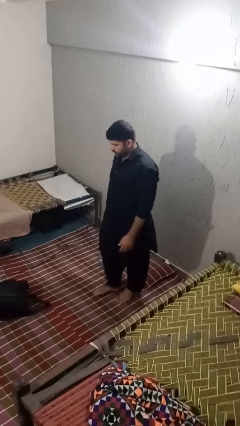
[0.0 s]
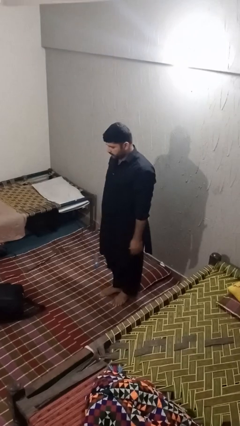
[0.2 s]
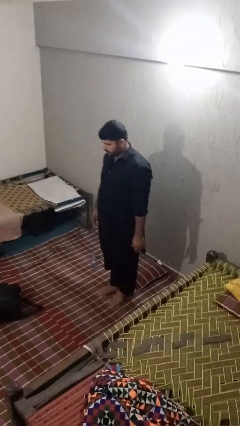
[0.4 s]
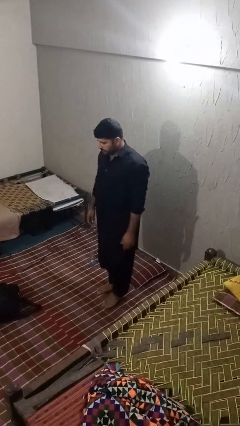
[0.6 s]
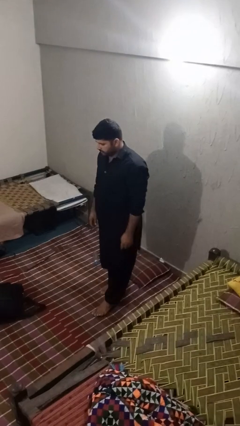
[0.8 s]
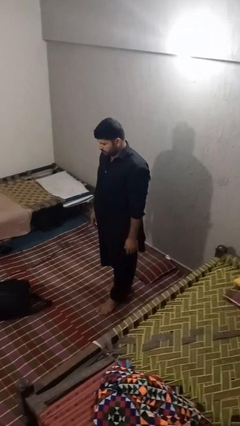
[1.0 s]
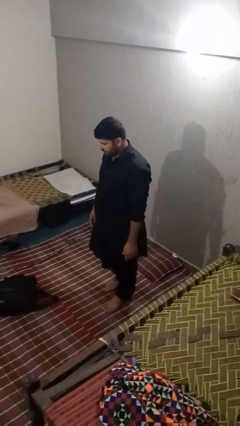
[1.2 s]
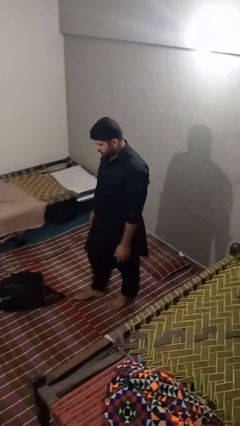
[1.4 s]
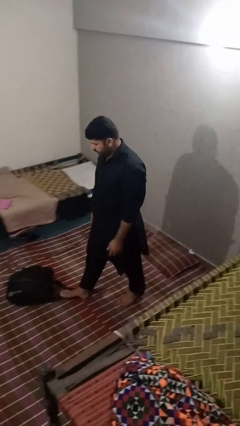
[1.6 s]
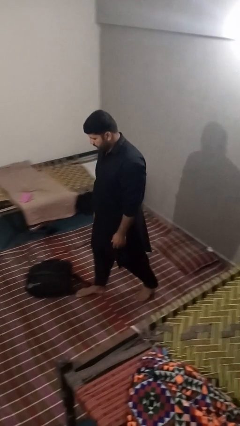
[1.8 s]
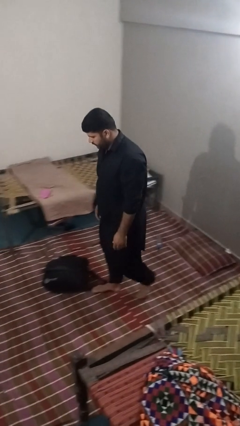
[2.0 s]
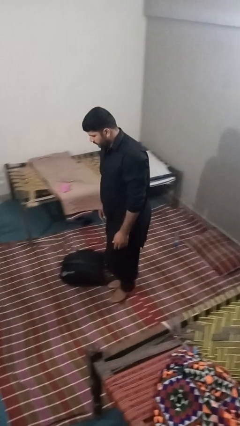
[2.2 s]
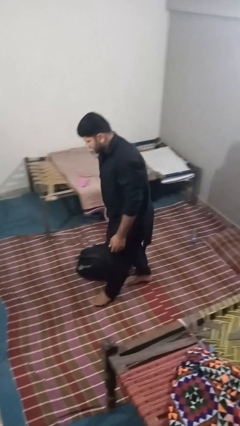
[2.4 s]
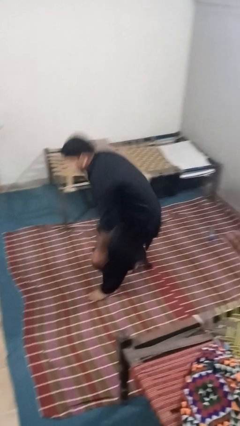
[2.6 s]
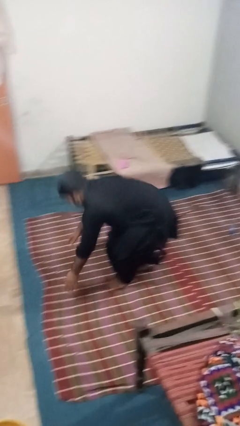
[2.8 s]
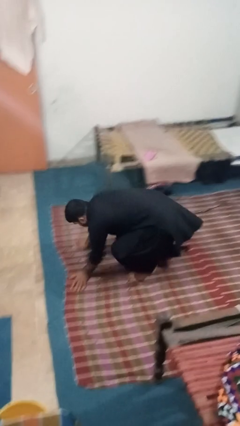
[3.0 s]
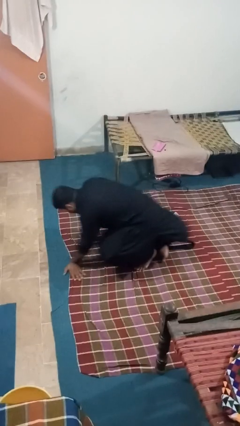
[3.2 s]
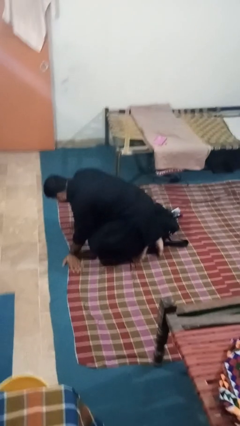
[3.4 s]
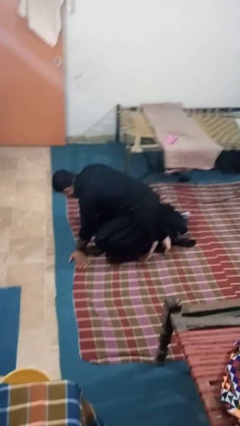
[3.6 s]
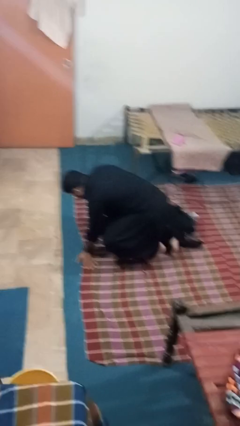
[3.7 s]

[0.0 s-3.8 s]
person trips on object on floor

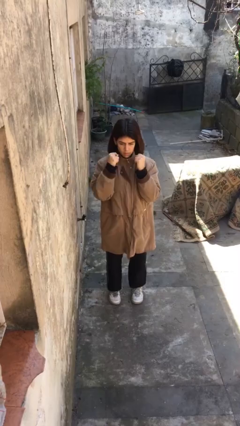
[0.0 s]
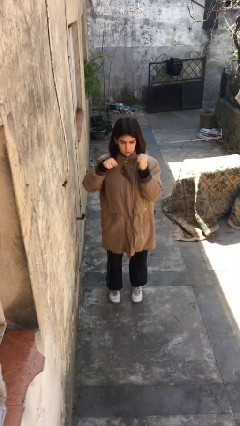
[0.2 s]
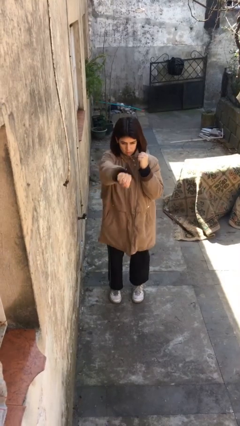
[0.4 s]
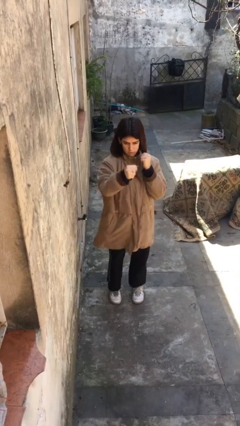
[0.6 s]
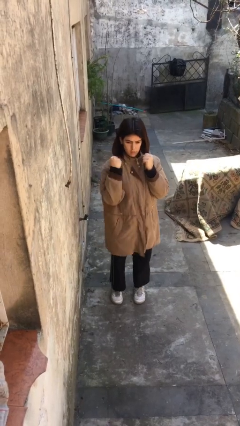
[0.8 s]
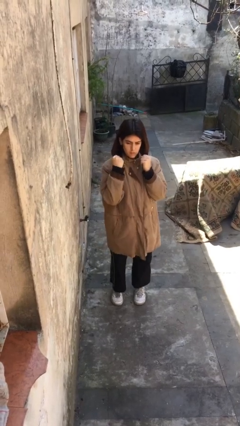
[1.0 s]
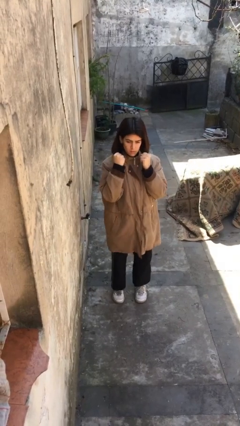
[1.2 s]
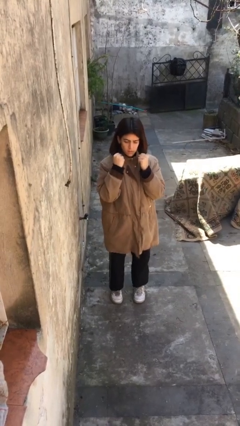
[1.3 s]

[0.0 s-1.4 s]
person punches

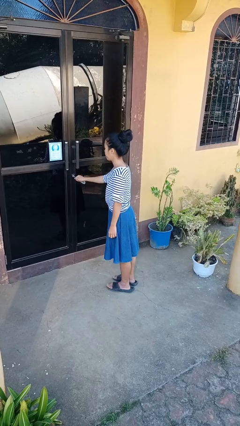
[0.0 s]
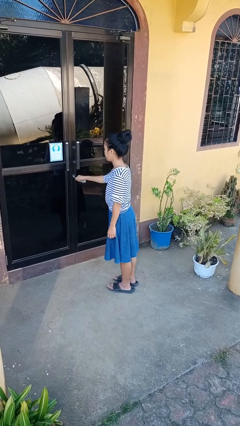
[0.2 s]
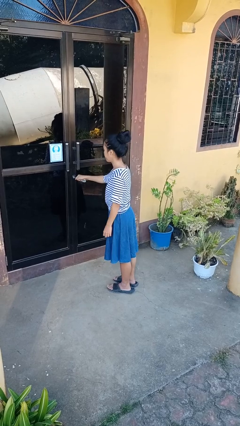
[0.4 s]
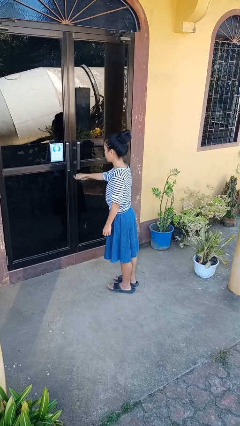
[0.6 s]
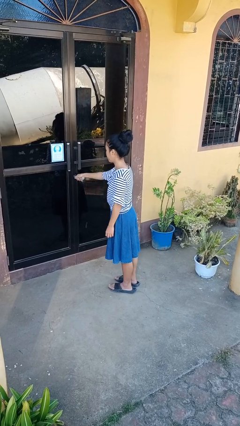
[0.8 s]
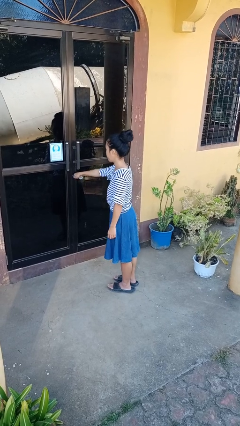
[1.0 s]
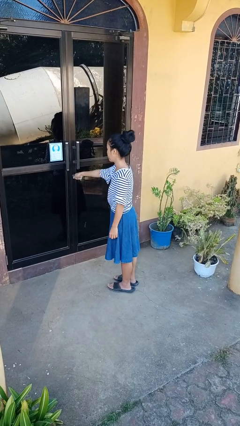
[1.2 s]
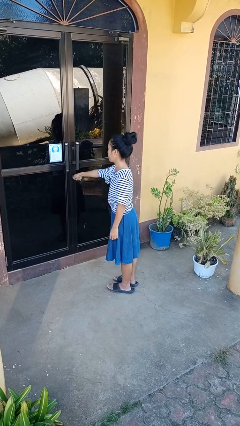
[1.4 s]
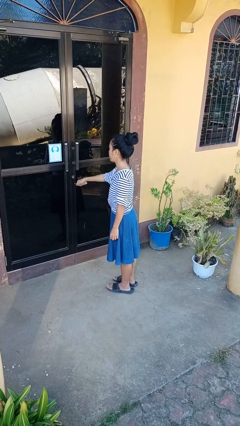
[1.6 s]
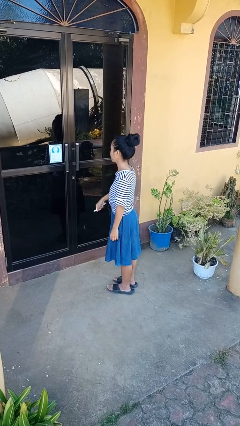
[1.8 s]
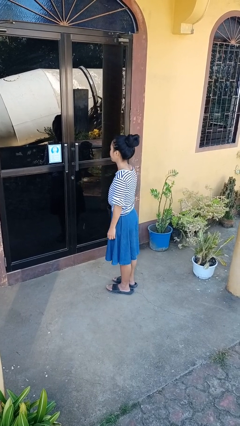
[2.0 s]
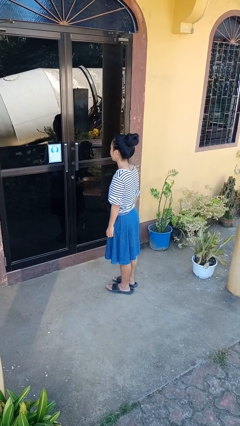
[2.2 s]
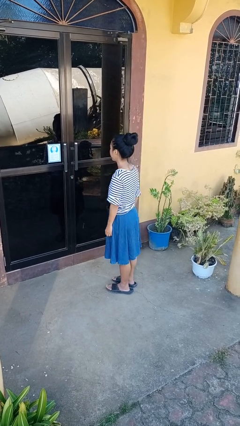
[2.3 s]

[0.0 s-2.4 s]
person locks door with keys

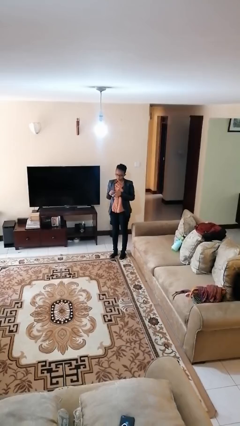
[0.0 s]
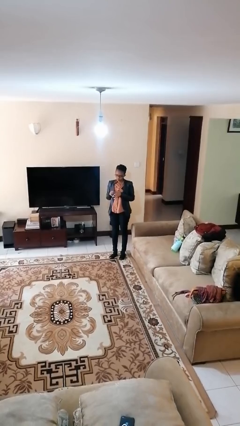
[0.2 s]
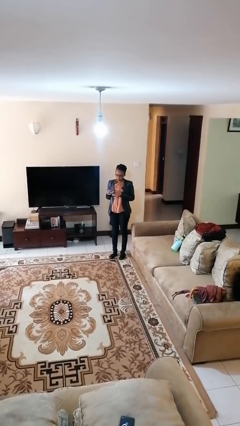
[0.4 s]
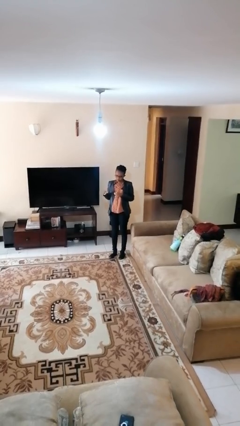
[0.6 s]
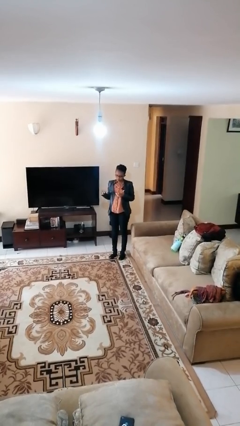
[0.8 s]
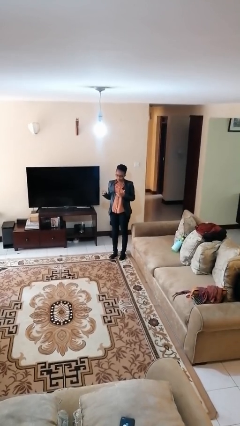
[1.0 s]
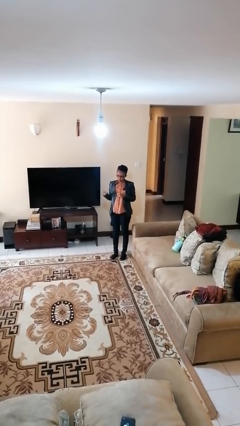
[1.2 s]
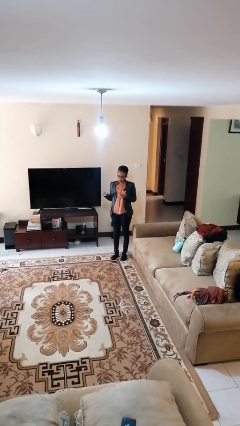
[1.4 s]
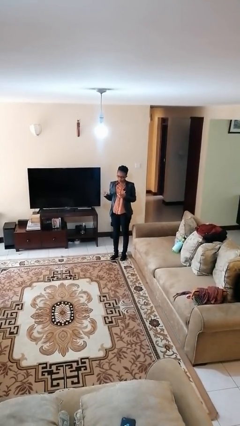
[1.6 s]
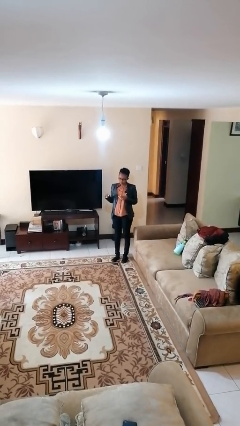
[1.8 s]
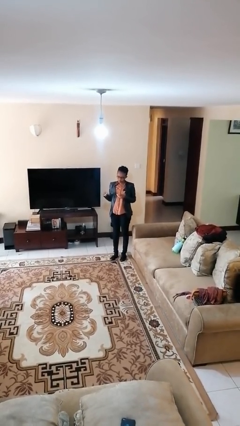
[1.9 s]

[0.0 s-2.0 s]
person takes off ring

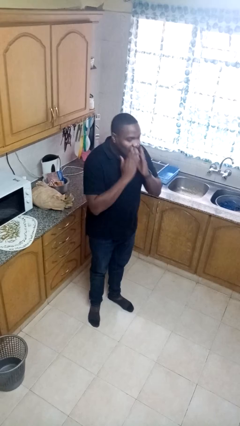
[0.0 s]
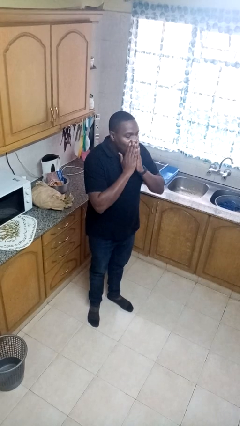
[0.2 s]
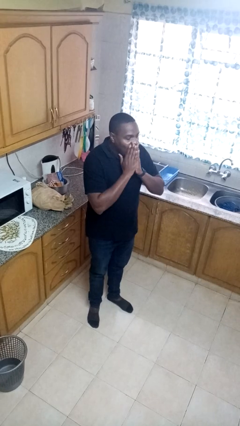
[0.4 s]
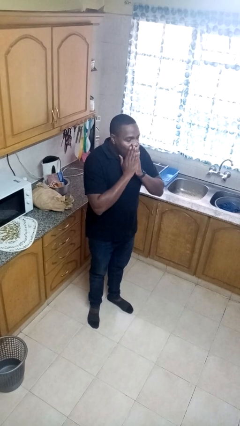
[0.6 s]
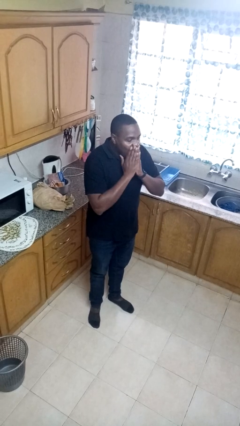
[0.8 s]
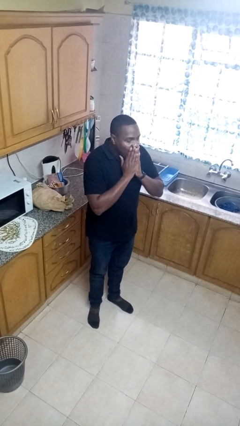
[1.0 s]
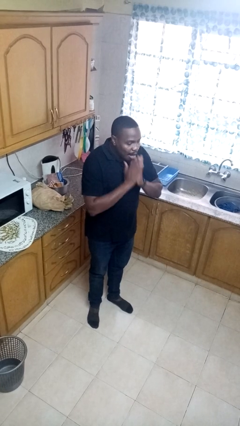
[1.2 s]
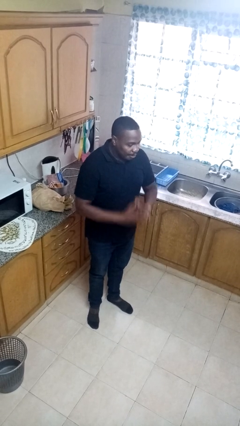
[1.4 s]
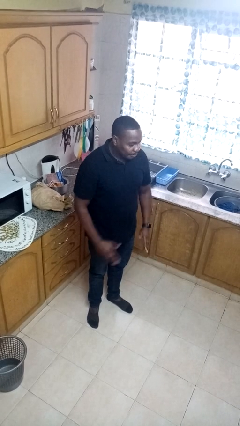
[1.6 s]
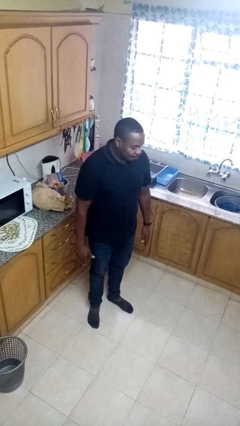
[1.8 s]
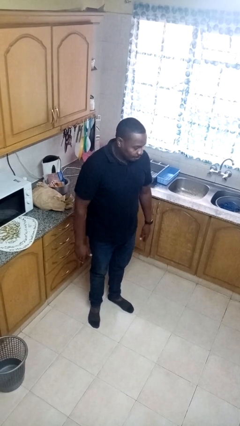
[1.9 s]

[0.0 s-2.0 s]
person yawns

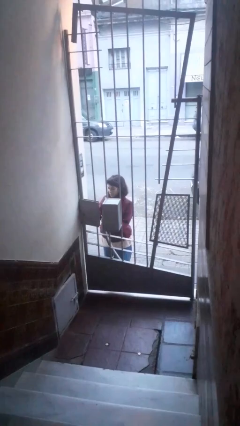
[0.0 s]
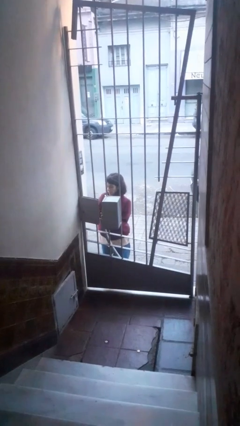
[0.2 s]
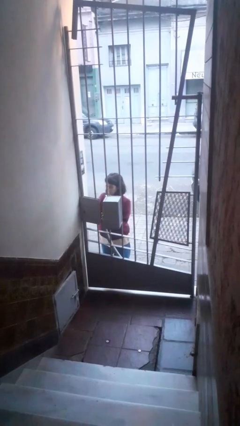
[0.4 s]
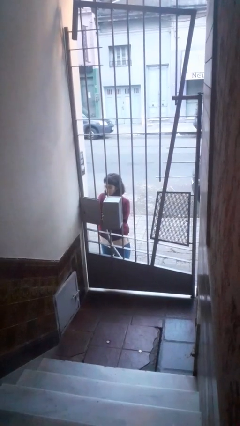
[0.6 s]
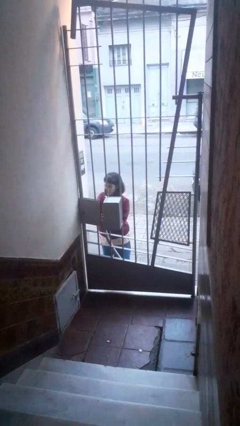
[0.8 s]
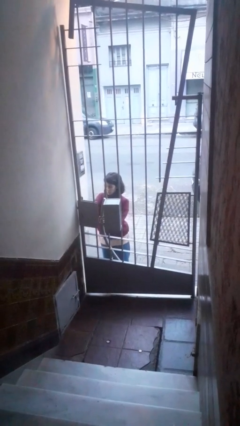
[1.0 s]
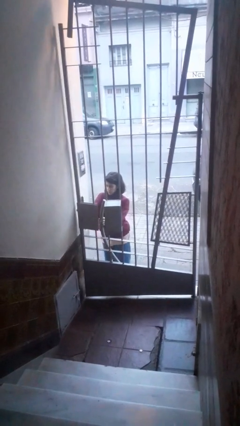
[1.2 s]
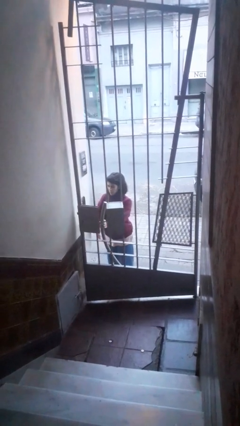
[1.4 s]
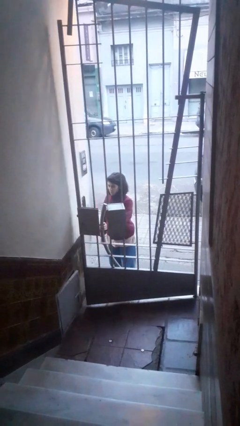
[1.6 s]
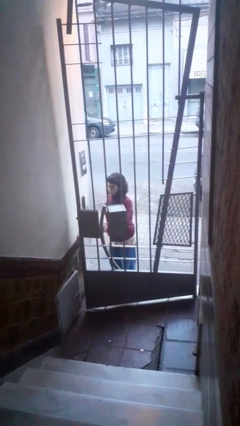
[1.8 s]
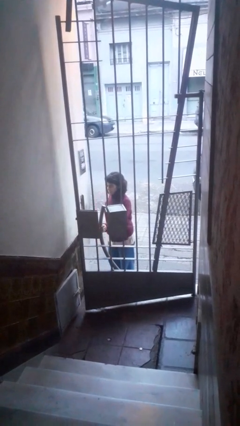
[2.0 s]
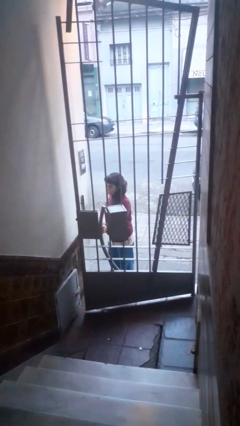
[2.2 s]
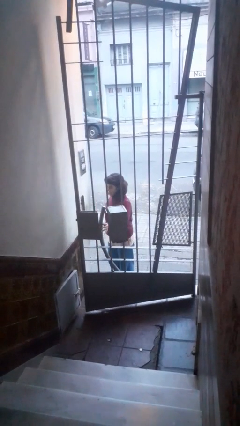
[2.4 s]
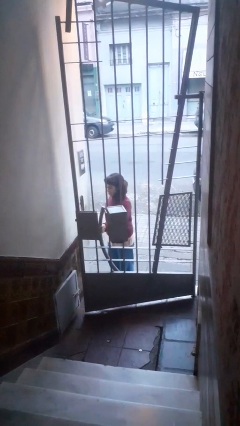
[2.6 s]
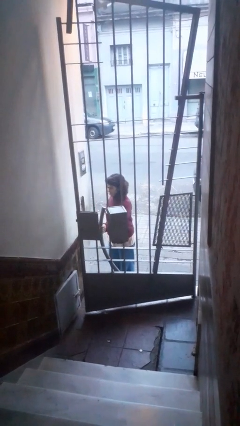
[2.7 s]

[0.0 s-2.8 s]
person opens gate

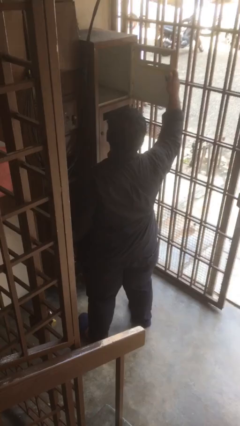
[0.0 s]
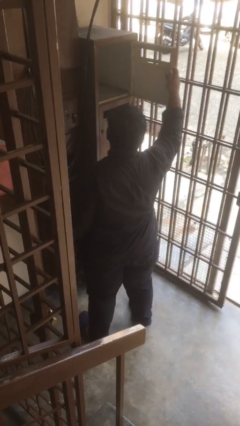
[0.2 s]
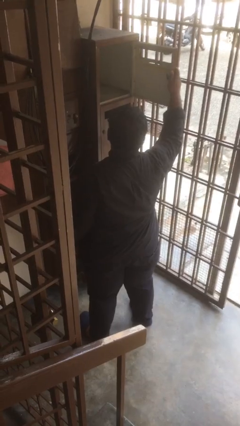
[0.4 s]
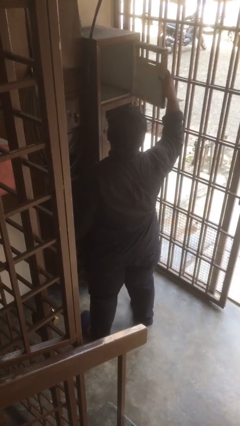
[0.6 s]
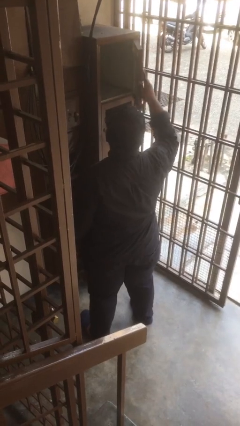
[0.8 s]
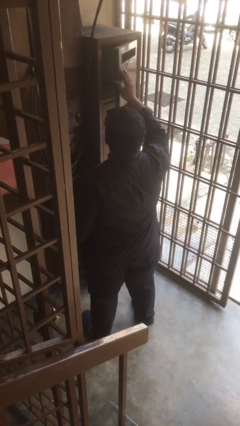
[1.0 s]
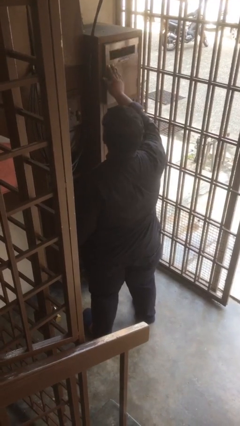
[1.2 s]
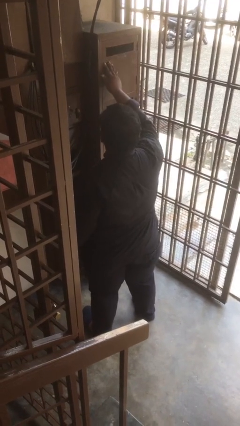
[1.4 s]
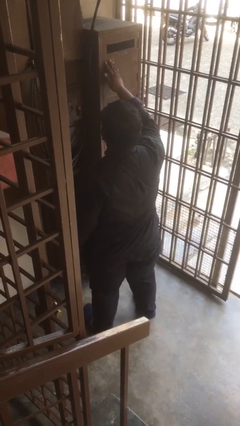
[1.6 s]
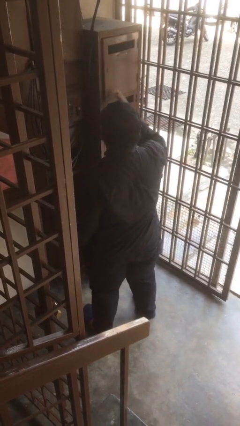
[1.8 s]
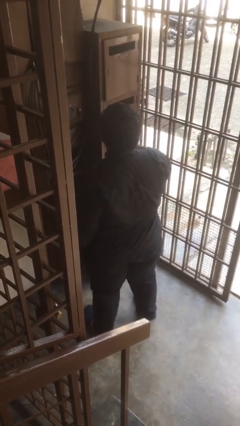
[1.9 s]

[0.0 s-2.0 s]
person closes mailbox

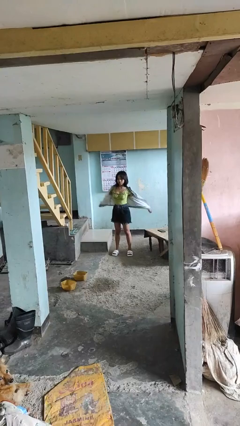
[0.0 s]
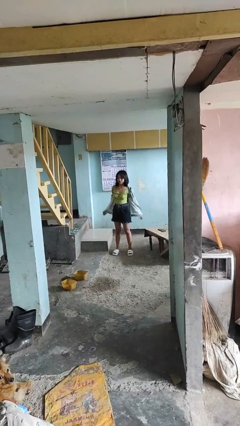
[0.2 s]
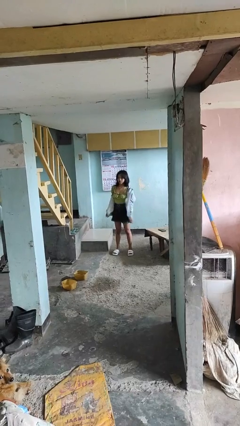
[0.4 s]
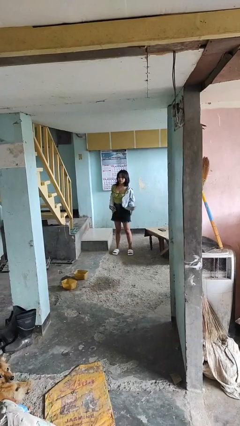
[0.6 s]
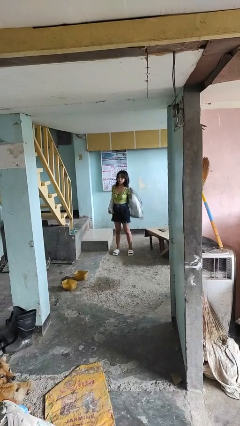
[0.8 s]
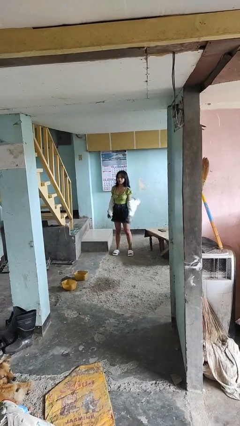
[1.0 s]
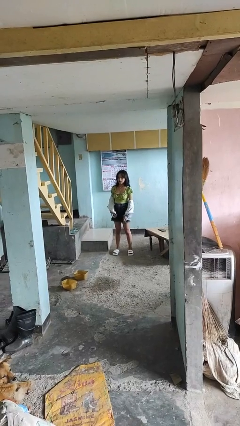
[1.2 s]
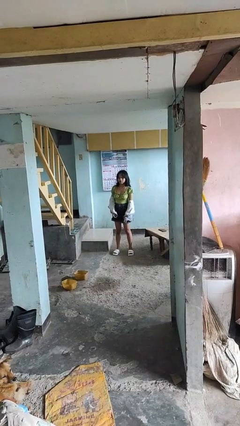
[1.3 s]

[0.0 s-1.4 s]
person takes off jacket
